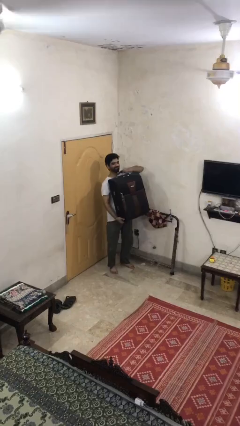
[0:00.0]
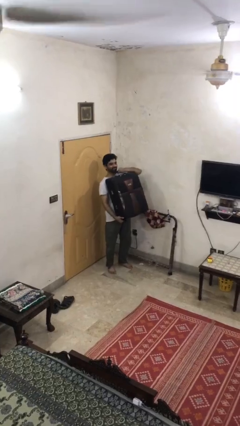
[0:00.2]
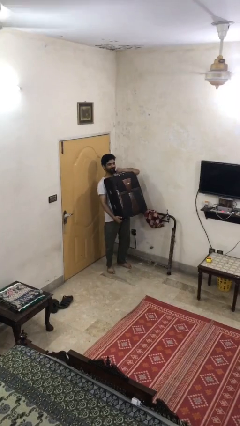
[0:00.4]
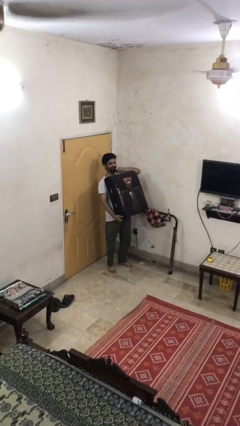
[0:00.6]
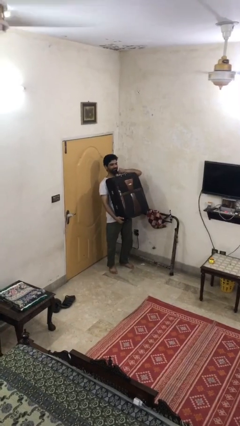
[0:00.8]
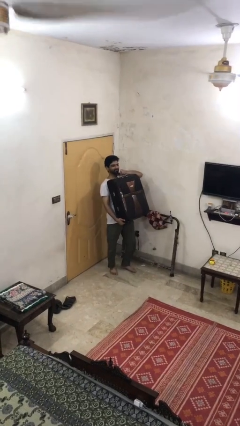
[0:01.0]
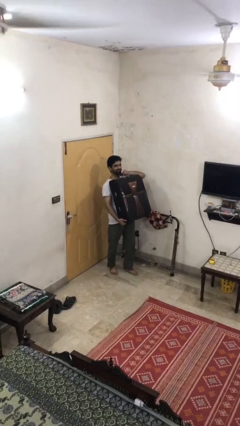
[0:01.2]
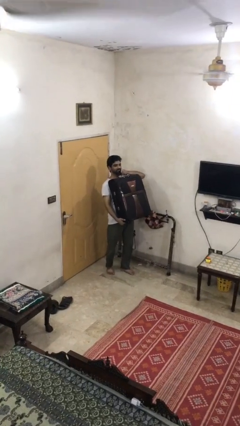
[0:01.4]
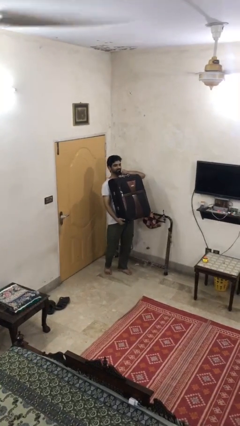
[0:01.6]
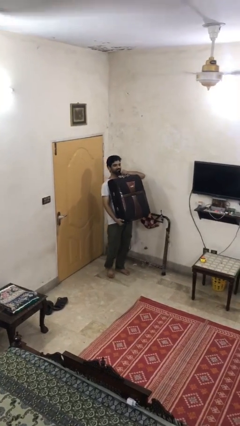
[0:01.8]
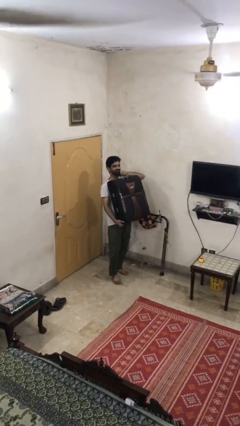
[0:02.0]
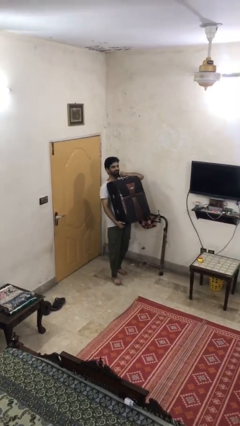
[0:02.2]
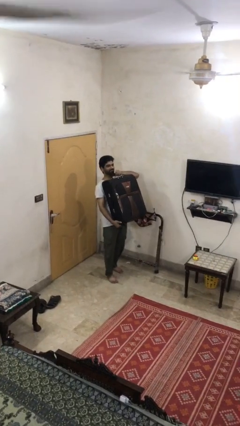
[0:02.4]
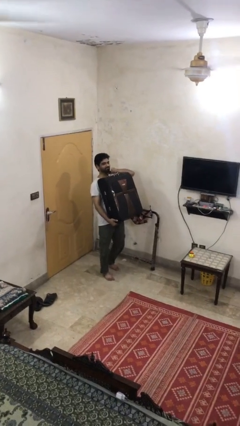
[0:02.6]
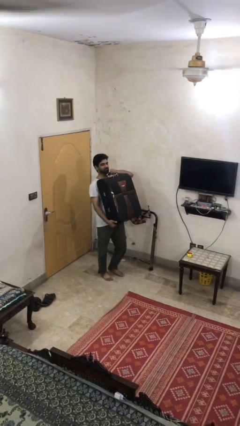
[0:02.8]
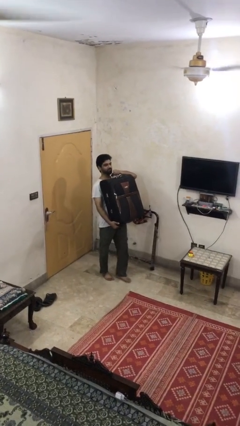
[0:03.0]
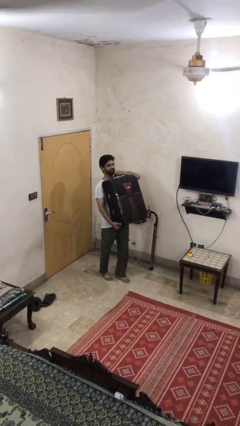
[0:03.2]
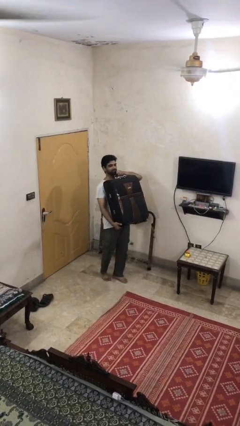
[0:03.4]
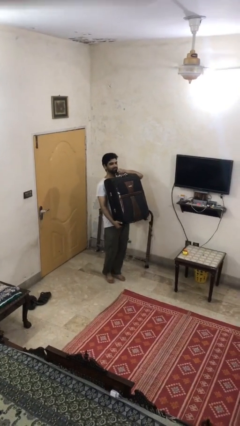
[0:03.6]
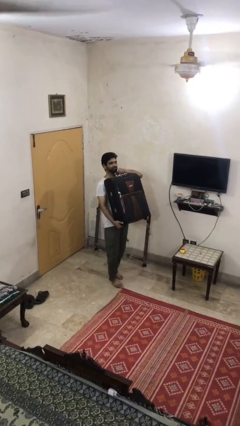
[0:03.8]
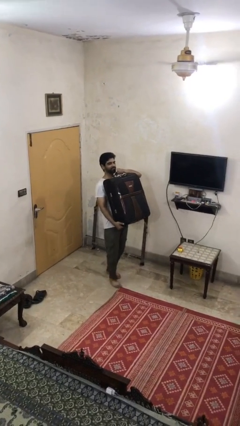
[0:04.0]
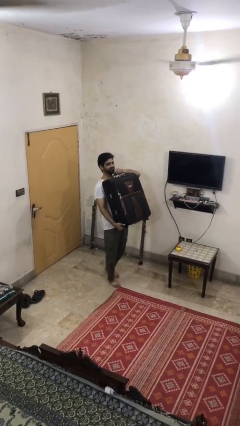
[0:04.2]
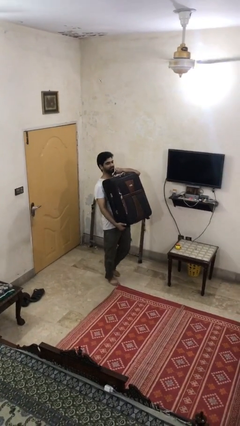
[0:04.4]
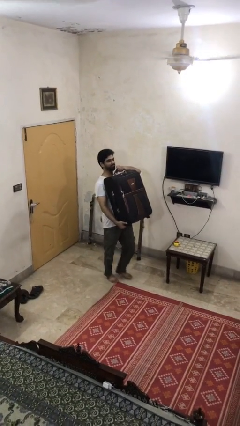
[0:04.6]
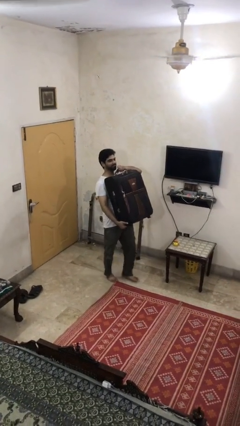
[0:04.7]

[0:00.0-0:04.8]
person carries heavy object

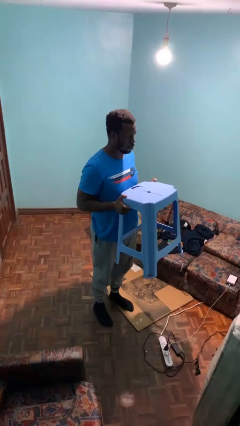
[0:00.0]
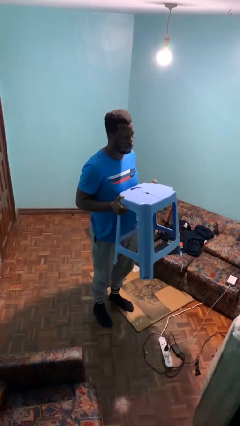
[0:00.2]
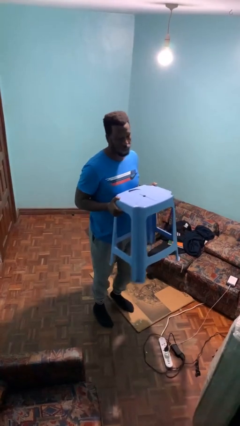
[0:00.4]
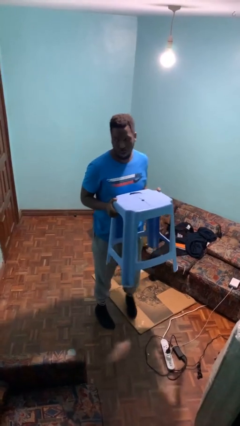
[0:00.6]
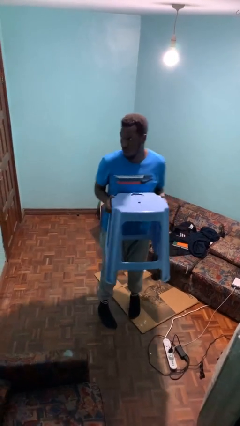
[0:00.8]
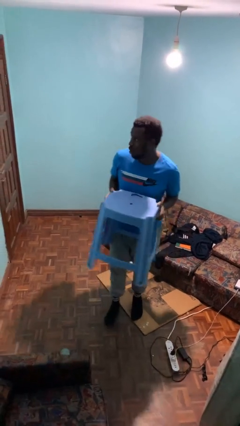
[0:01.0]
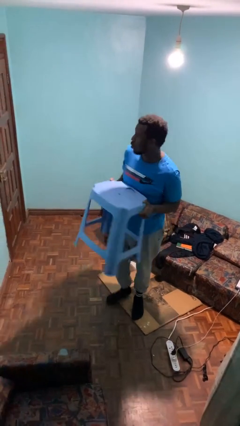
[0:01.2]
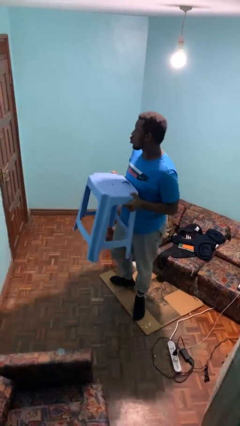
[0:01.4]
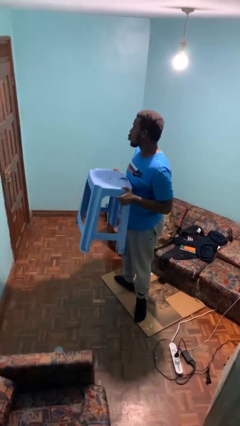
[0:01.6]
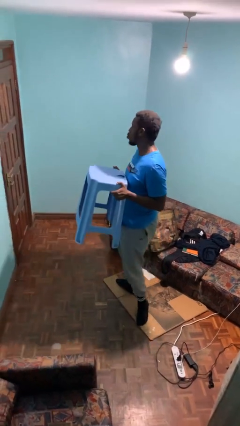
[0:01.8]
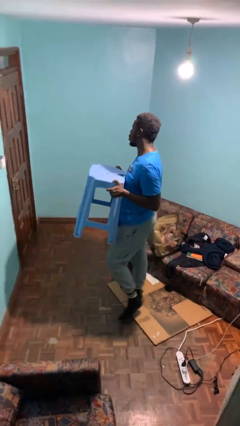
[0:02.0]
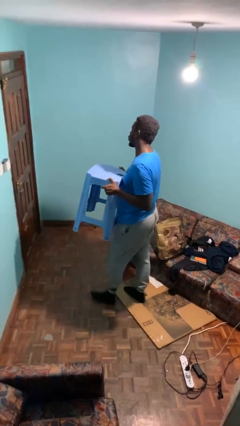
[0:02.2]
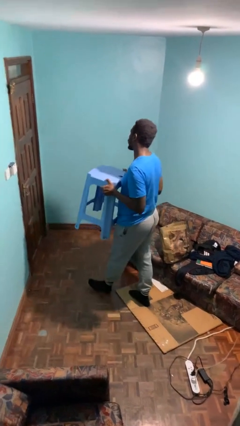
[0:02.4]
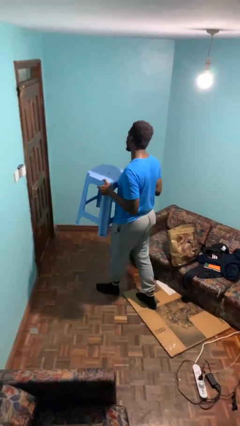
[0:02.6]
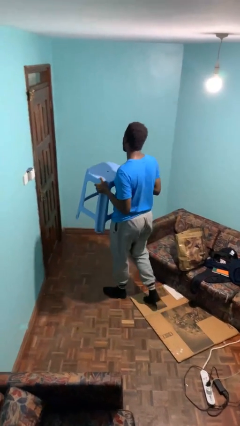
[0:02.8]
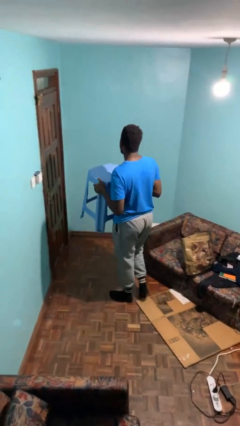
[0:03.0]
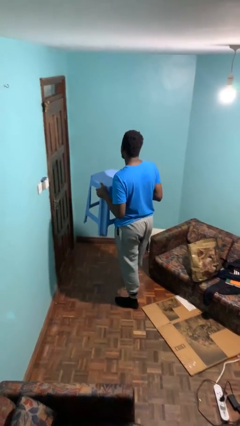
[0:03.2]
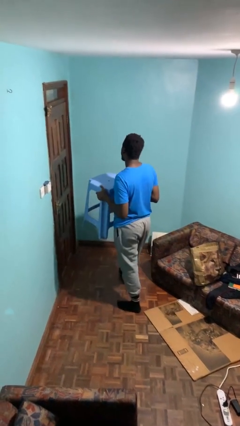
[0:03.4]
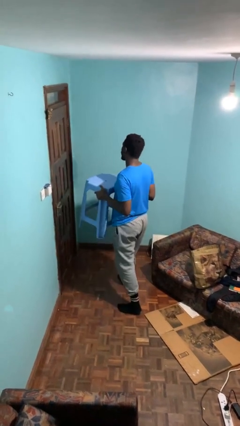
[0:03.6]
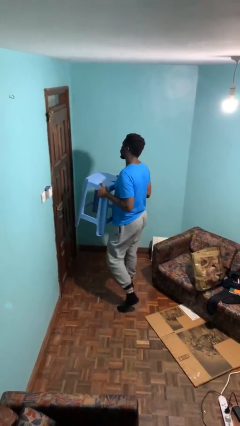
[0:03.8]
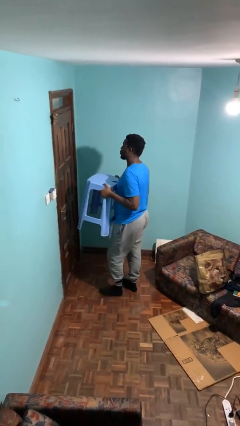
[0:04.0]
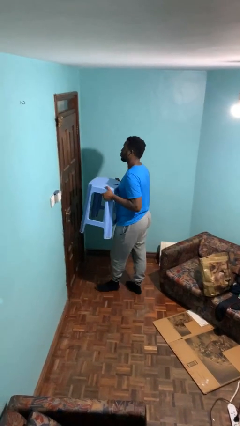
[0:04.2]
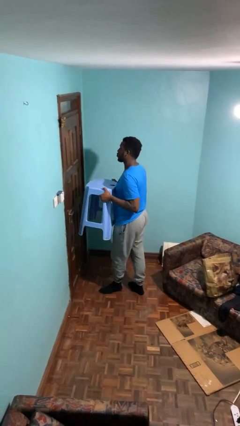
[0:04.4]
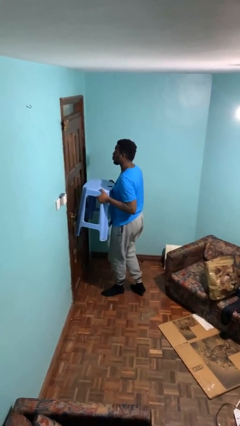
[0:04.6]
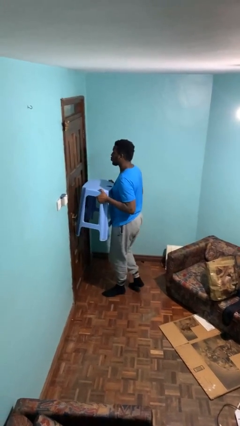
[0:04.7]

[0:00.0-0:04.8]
person carries furniture

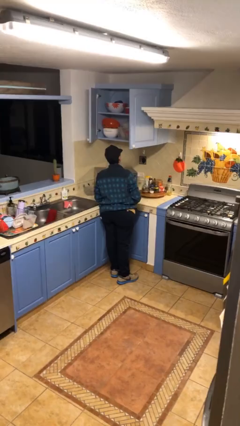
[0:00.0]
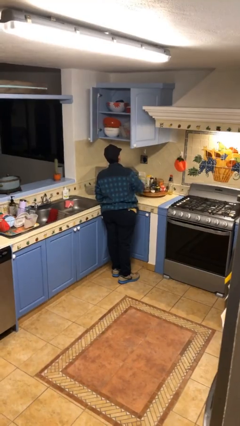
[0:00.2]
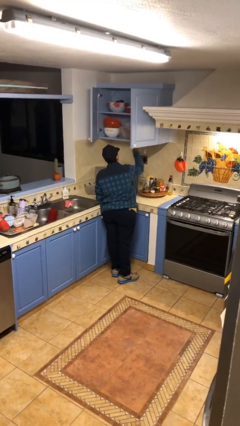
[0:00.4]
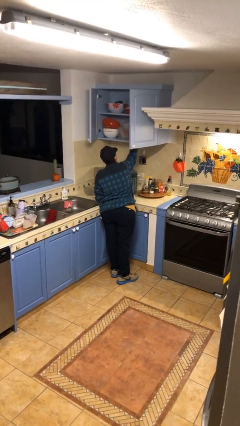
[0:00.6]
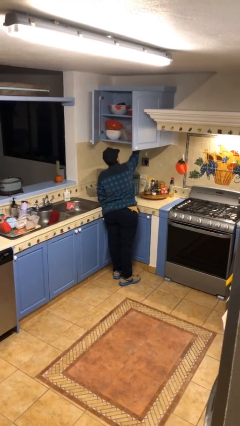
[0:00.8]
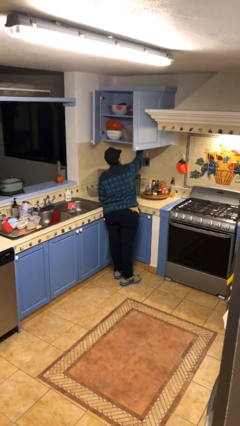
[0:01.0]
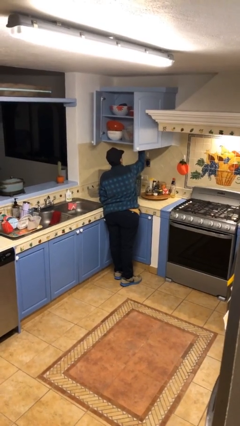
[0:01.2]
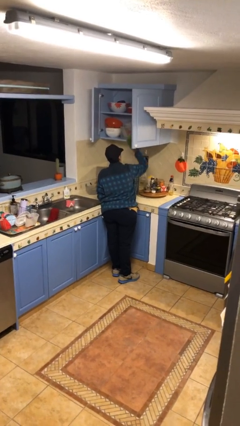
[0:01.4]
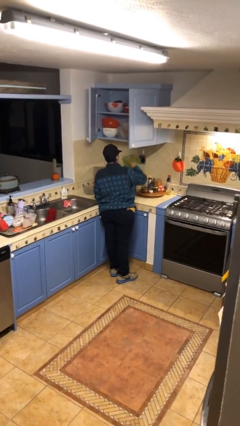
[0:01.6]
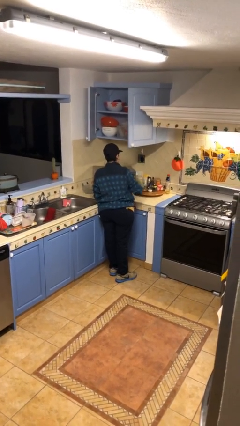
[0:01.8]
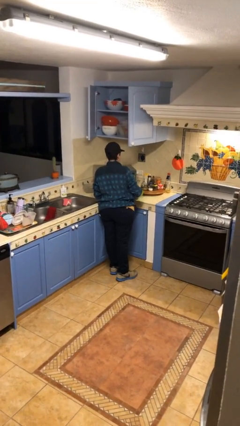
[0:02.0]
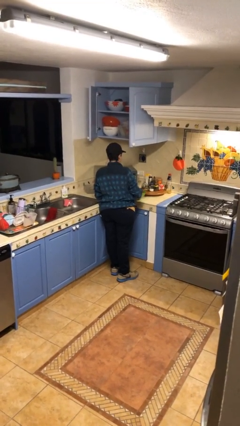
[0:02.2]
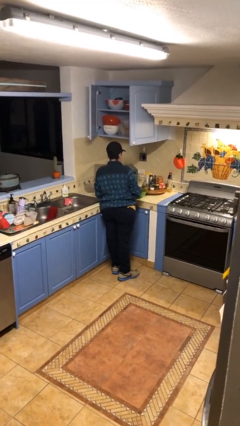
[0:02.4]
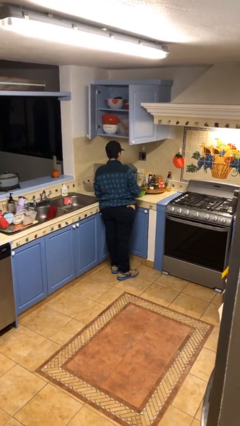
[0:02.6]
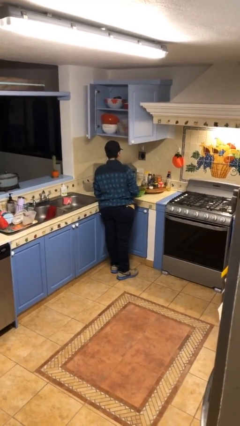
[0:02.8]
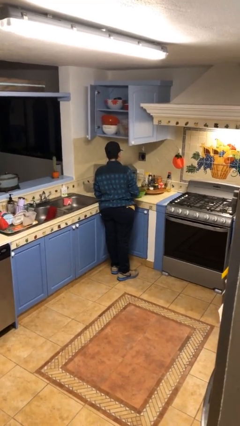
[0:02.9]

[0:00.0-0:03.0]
person takes object from cabinet

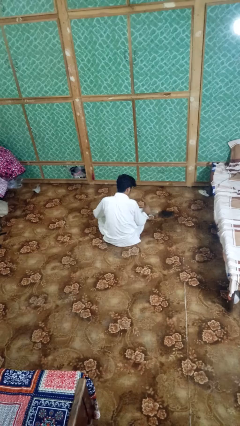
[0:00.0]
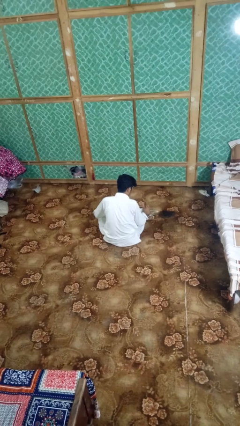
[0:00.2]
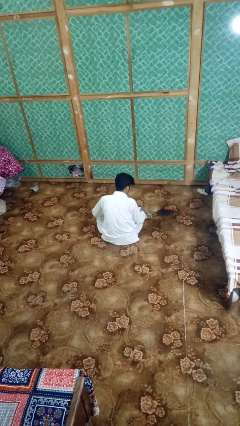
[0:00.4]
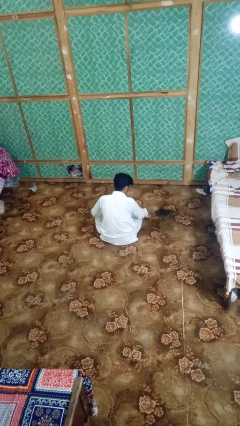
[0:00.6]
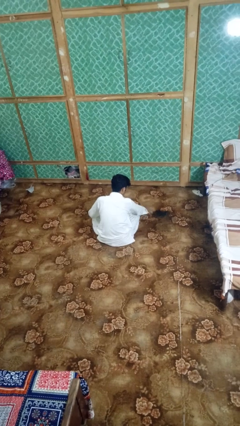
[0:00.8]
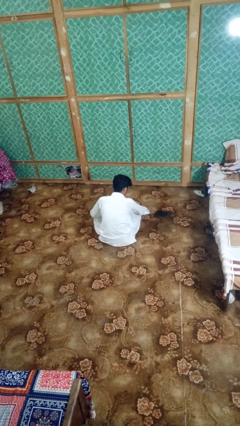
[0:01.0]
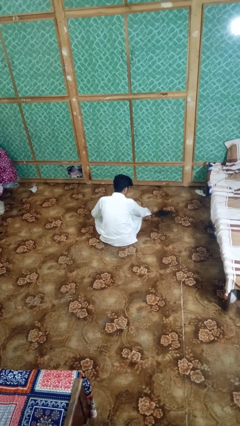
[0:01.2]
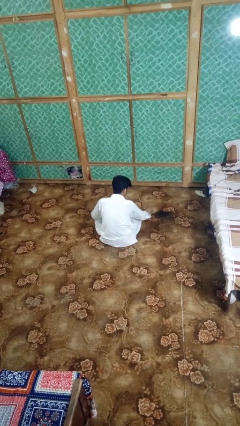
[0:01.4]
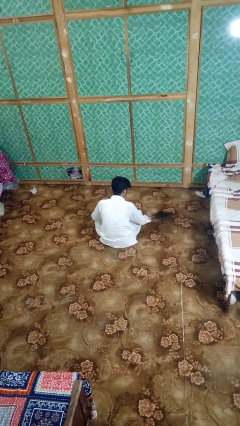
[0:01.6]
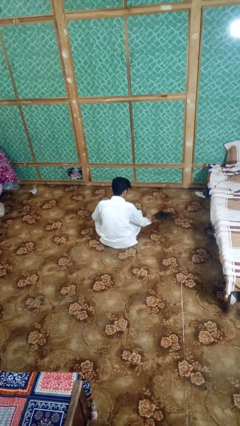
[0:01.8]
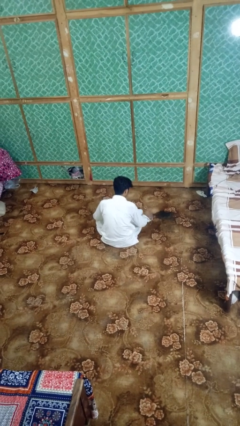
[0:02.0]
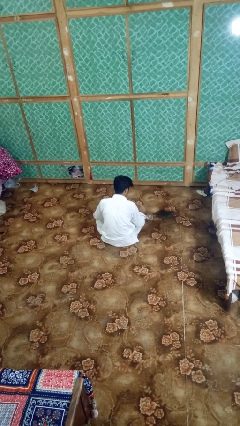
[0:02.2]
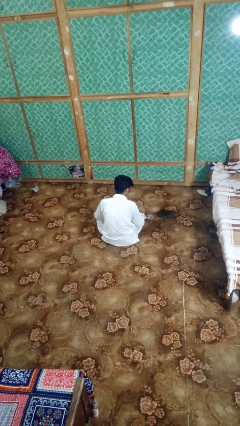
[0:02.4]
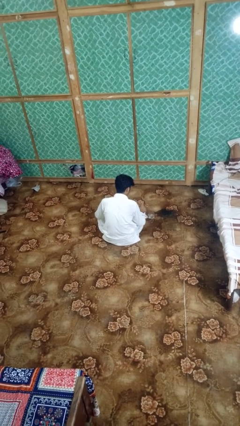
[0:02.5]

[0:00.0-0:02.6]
person sets upright glass

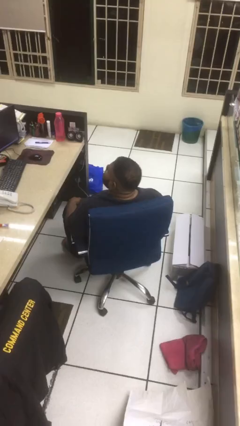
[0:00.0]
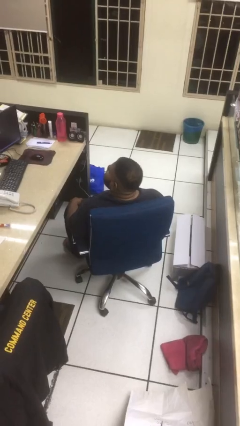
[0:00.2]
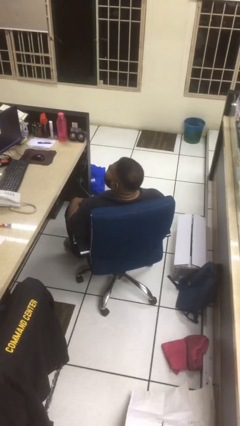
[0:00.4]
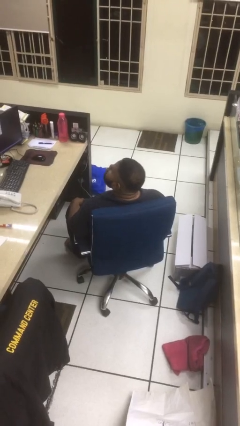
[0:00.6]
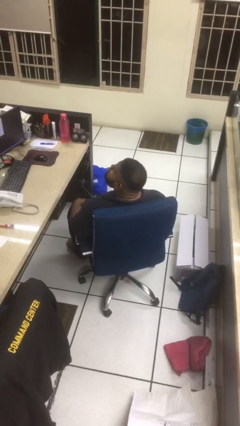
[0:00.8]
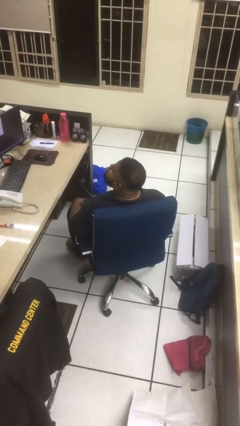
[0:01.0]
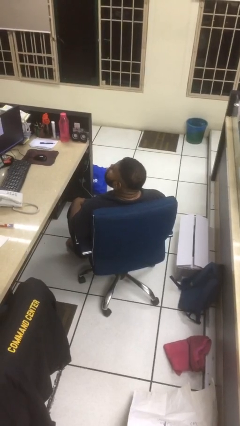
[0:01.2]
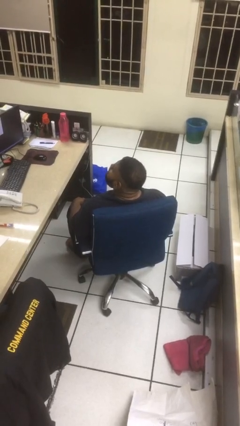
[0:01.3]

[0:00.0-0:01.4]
person sticks out tongue

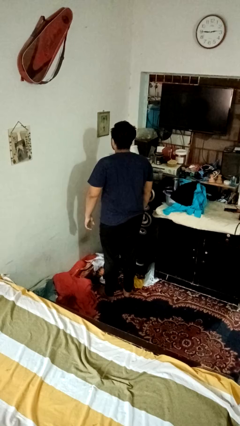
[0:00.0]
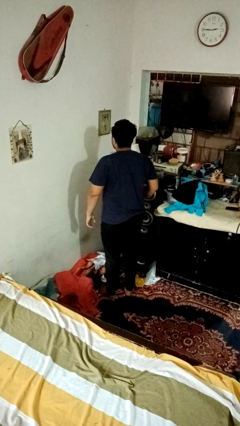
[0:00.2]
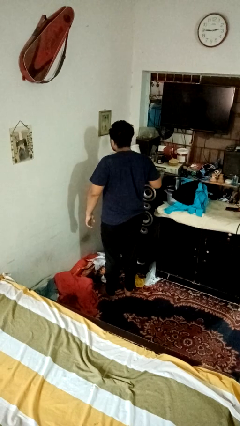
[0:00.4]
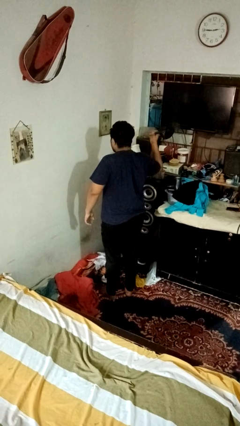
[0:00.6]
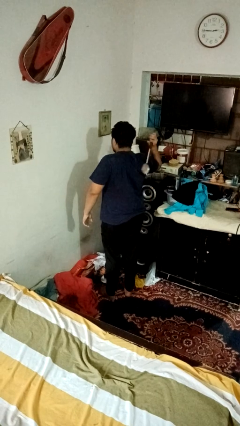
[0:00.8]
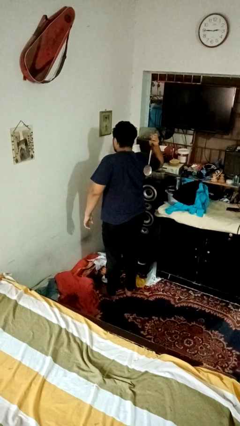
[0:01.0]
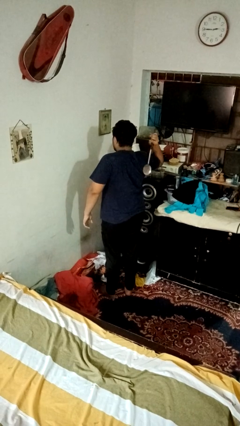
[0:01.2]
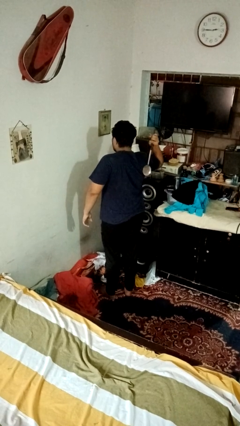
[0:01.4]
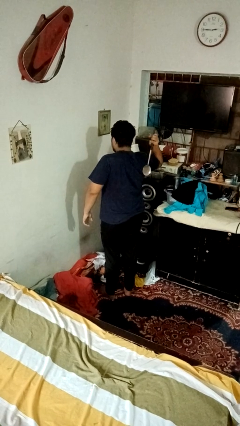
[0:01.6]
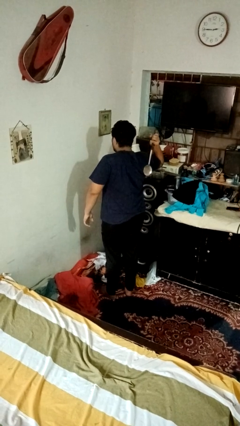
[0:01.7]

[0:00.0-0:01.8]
person swats bug
